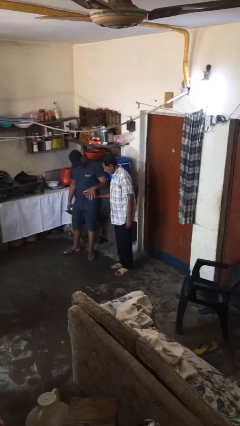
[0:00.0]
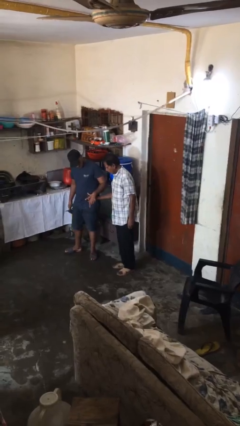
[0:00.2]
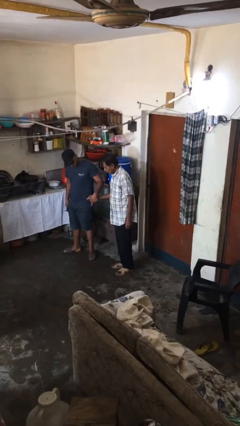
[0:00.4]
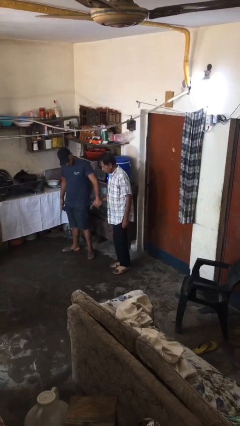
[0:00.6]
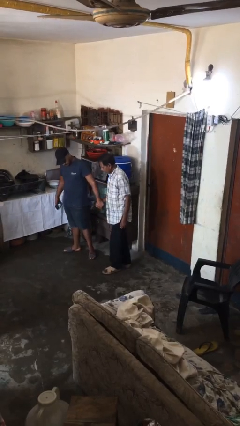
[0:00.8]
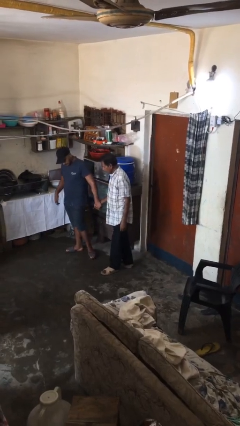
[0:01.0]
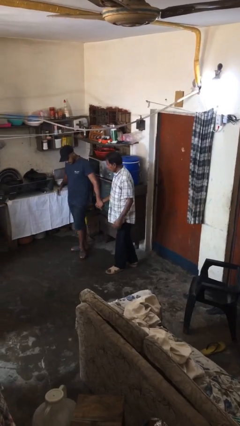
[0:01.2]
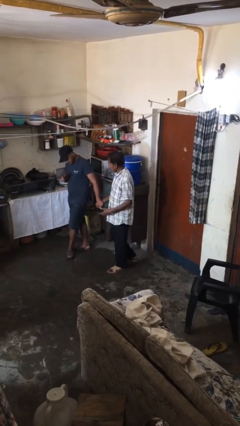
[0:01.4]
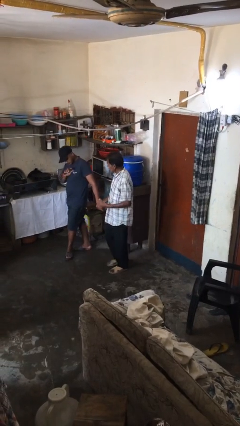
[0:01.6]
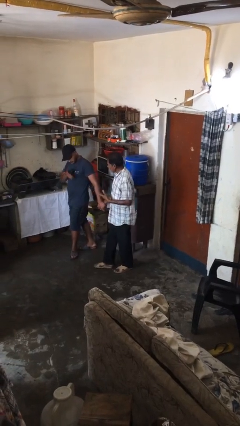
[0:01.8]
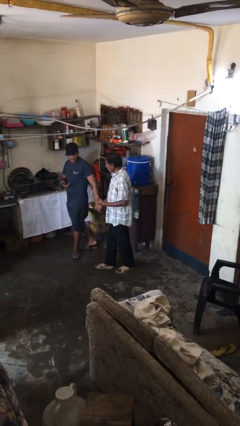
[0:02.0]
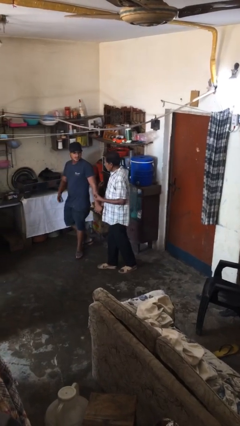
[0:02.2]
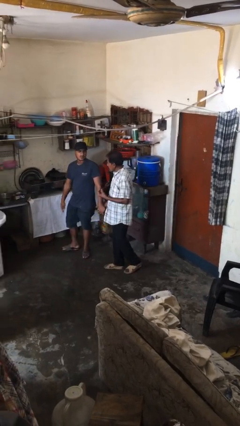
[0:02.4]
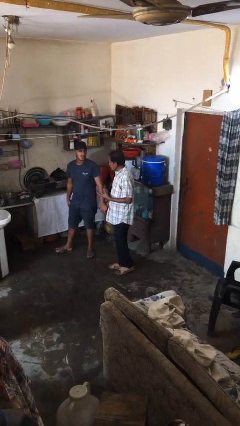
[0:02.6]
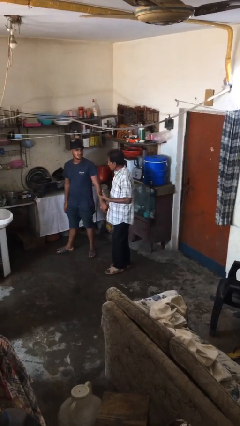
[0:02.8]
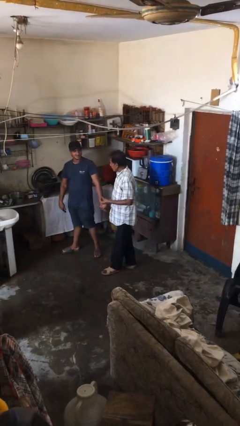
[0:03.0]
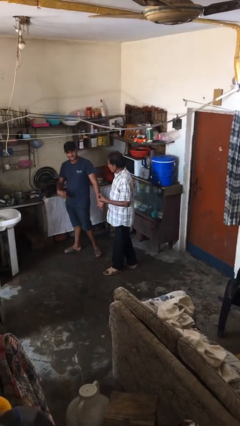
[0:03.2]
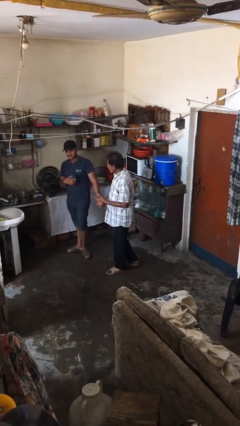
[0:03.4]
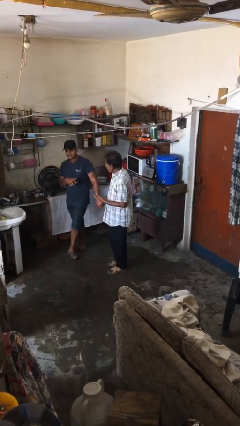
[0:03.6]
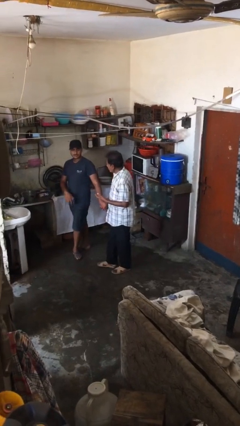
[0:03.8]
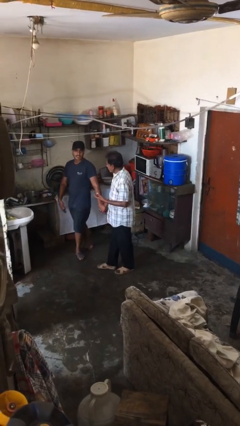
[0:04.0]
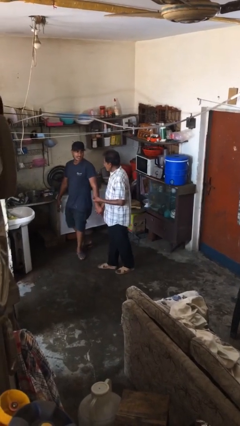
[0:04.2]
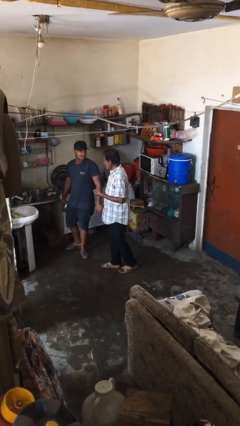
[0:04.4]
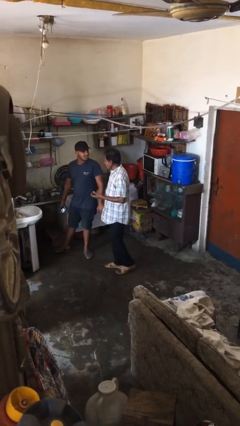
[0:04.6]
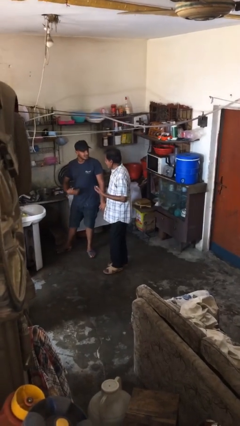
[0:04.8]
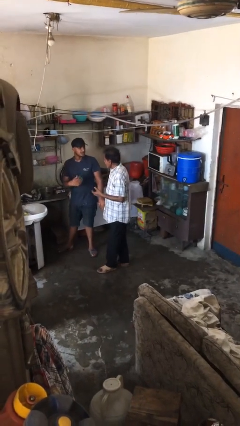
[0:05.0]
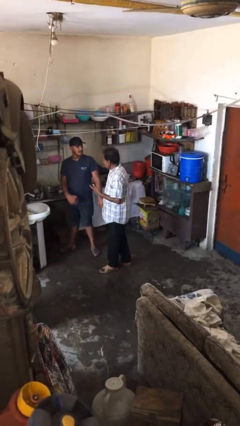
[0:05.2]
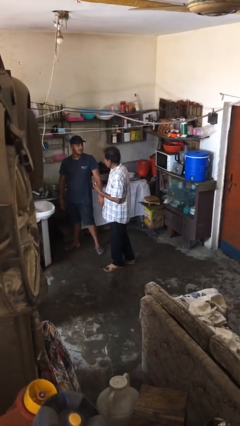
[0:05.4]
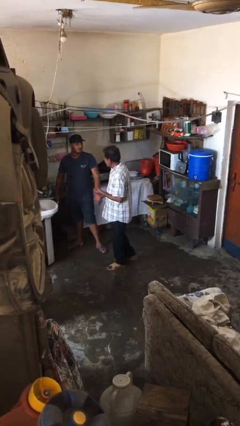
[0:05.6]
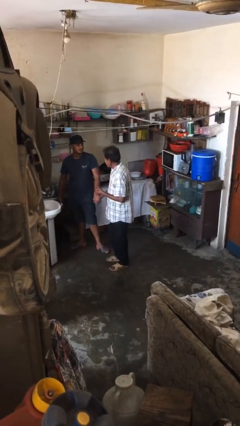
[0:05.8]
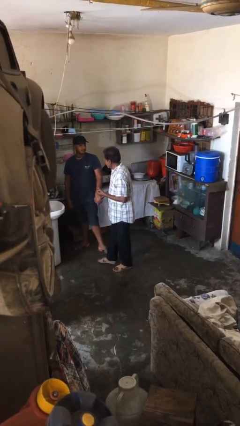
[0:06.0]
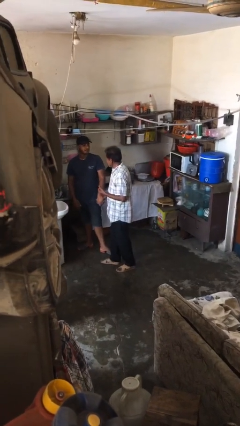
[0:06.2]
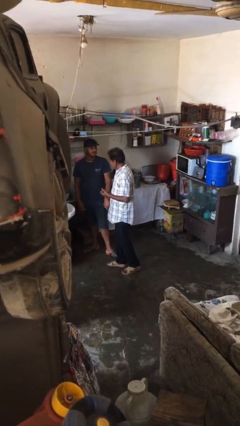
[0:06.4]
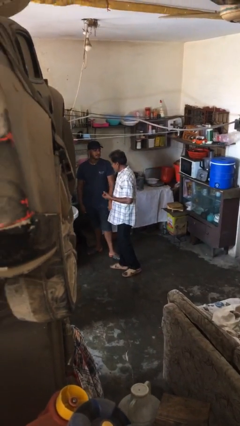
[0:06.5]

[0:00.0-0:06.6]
person holds hand

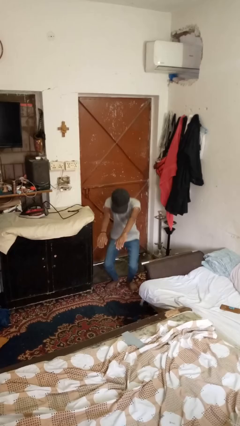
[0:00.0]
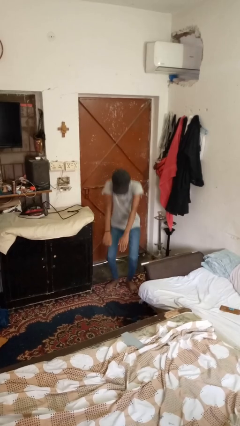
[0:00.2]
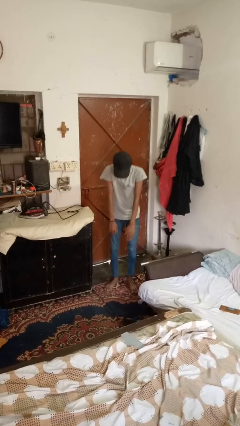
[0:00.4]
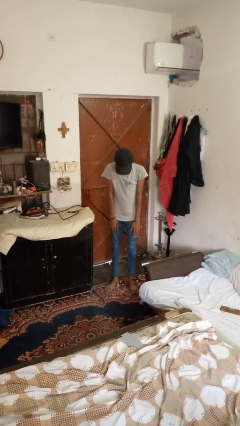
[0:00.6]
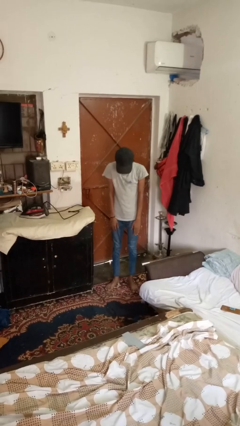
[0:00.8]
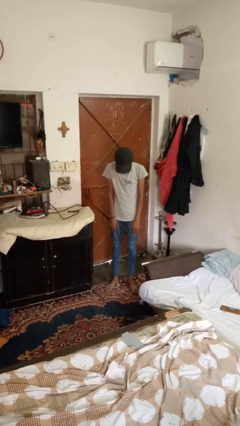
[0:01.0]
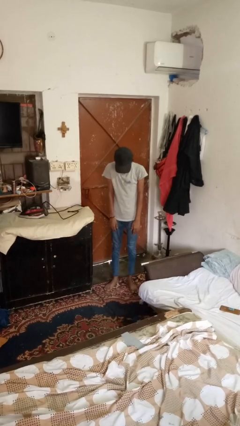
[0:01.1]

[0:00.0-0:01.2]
person stands up

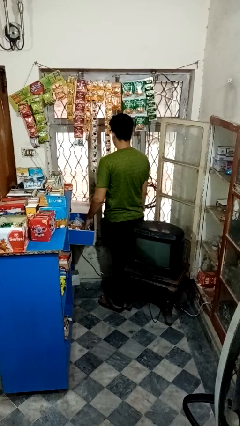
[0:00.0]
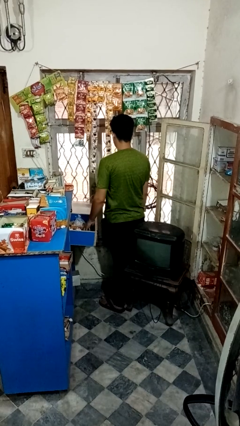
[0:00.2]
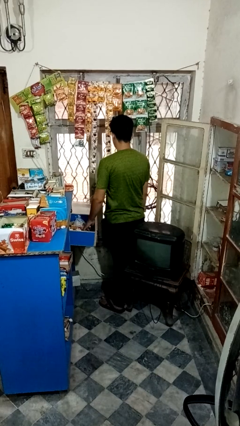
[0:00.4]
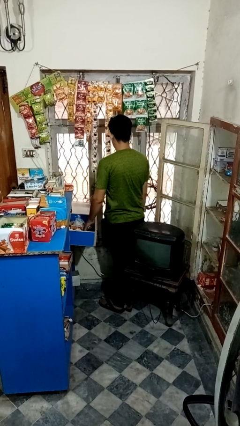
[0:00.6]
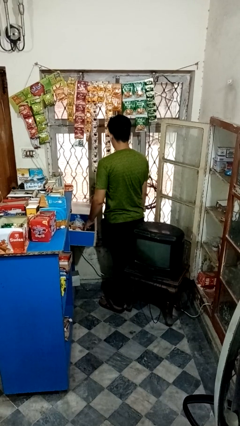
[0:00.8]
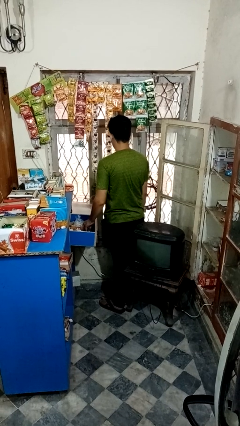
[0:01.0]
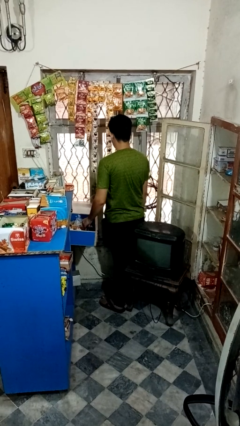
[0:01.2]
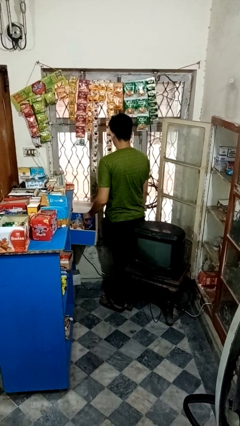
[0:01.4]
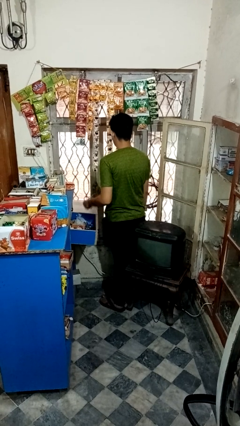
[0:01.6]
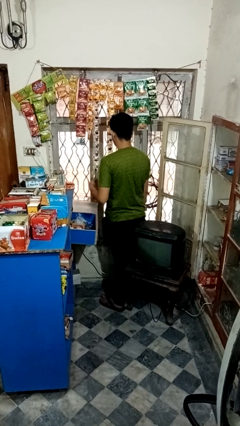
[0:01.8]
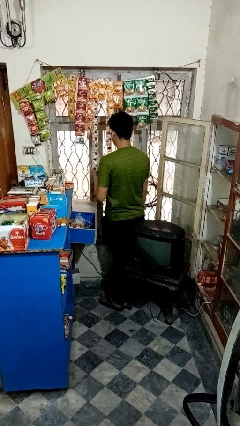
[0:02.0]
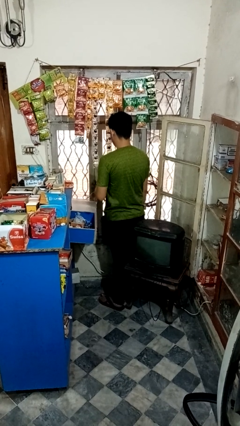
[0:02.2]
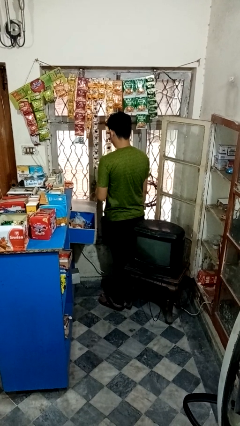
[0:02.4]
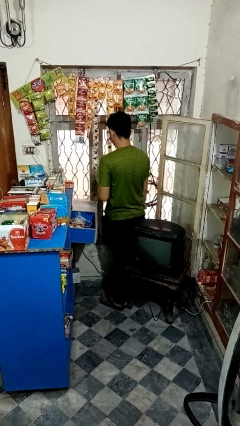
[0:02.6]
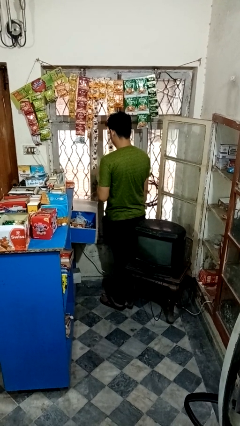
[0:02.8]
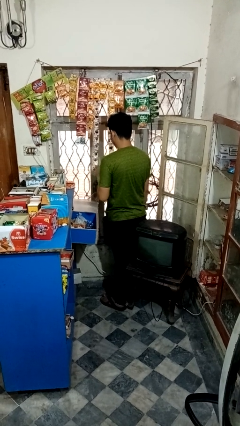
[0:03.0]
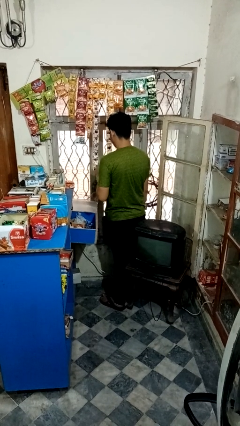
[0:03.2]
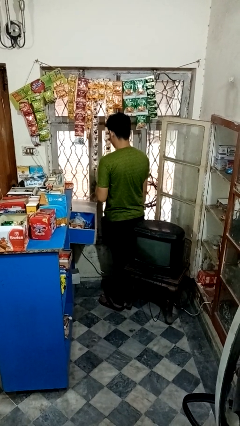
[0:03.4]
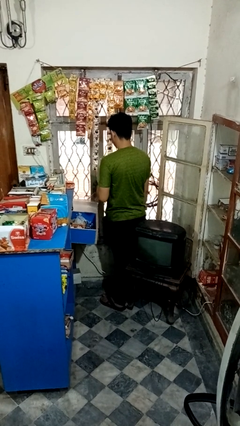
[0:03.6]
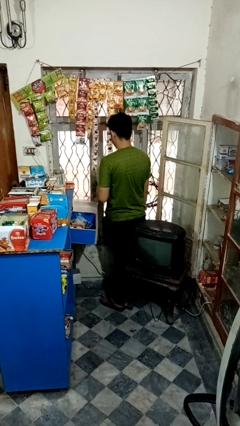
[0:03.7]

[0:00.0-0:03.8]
person searches in kitchen drawer

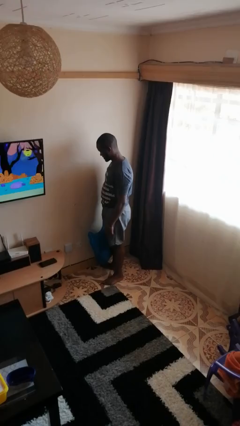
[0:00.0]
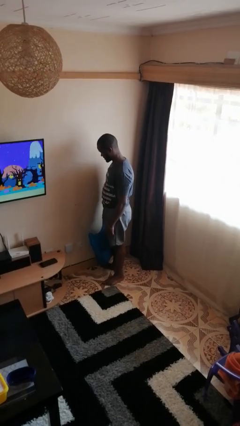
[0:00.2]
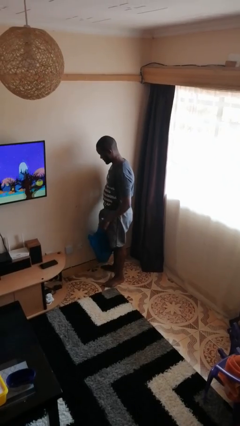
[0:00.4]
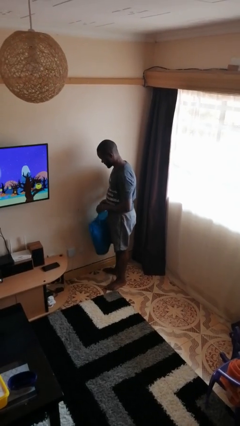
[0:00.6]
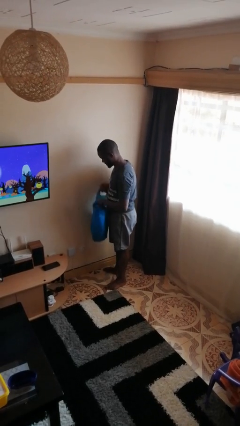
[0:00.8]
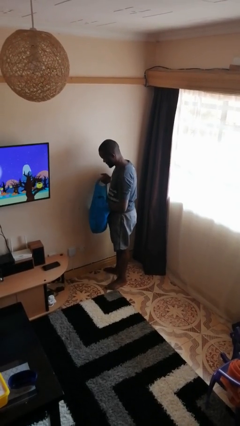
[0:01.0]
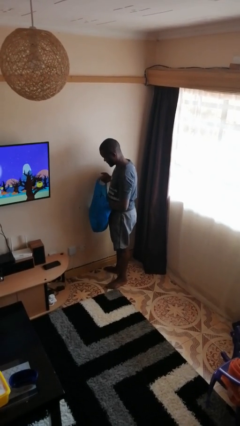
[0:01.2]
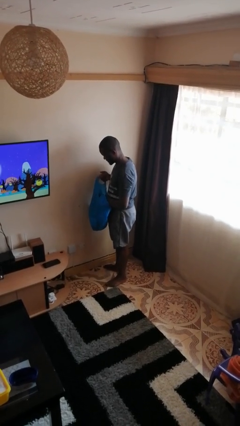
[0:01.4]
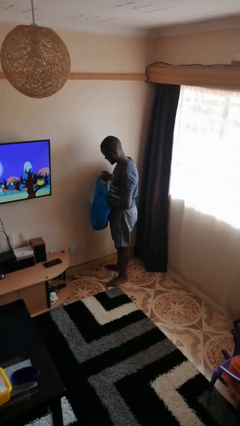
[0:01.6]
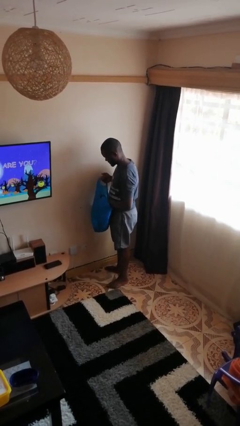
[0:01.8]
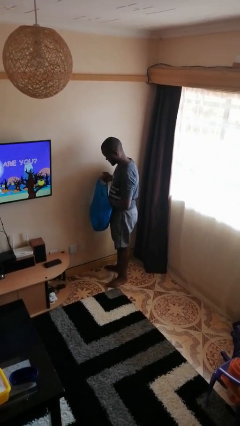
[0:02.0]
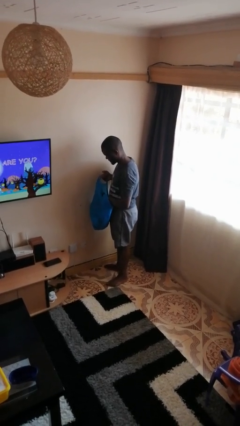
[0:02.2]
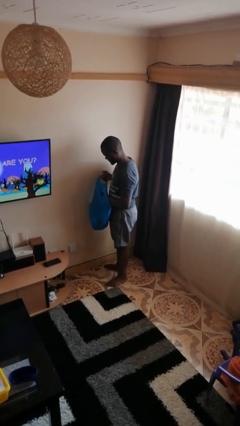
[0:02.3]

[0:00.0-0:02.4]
person searches in bag

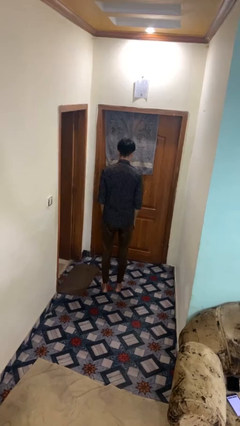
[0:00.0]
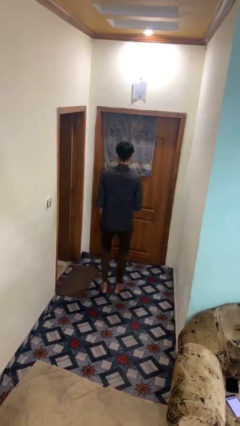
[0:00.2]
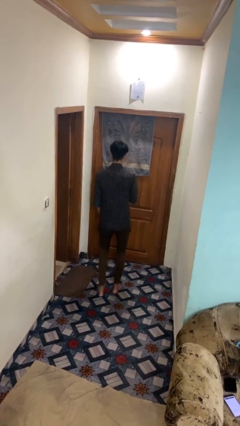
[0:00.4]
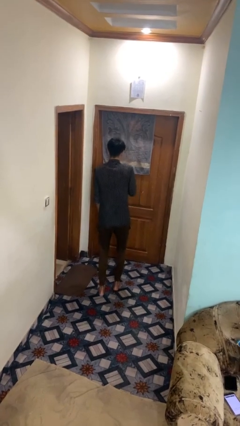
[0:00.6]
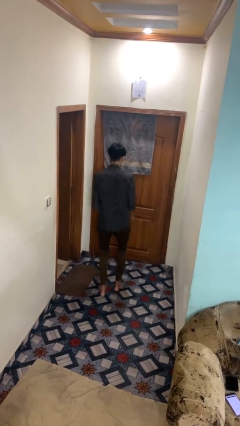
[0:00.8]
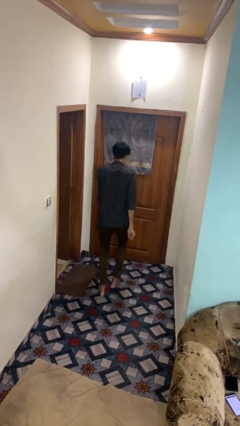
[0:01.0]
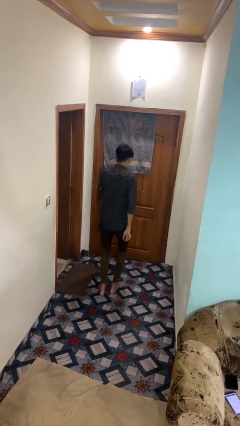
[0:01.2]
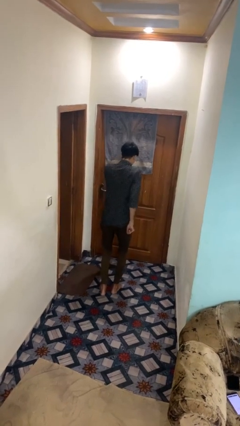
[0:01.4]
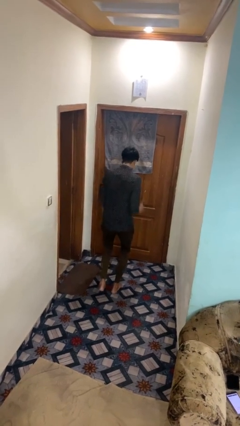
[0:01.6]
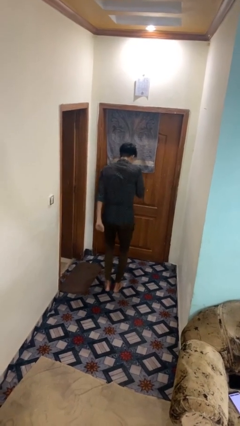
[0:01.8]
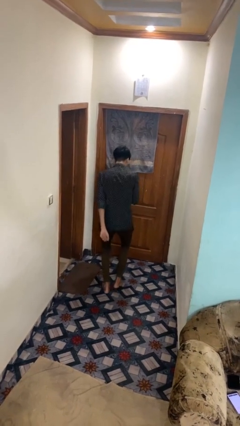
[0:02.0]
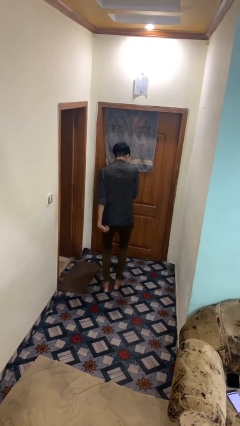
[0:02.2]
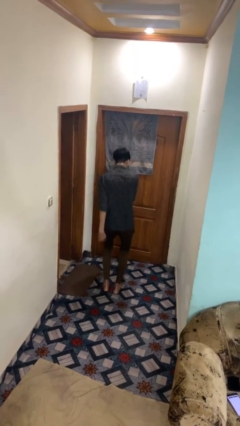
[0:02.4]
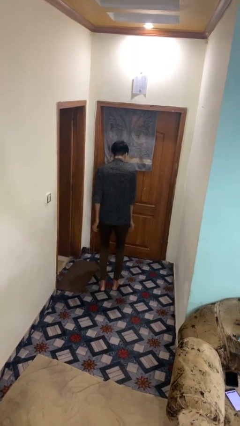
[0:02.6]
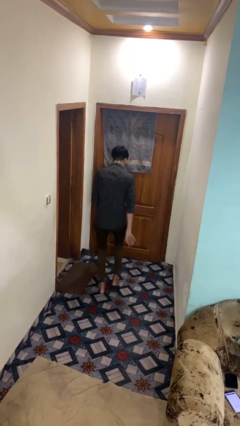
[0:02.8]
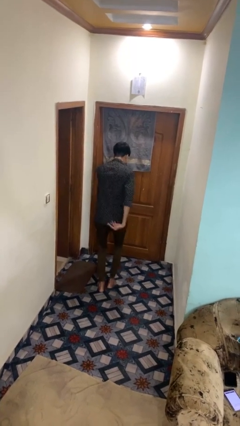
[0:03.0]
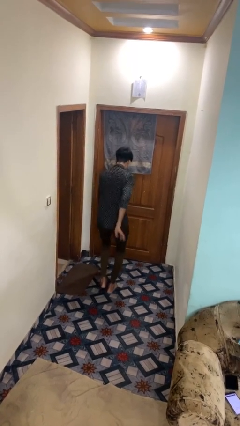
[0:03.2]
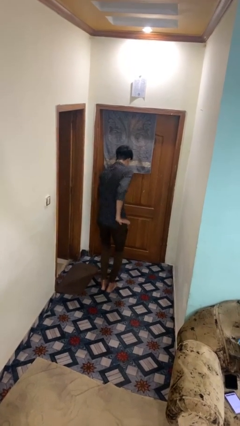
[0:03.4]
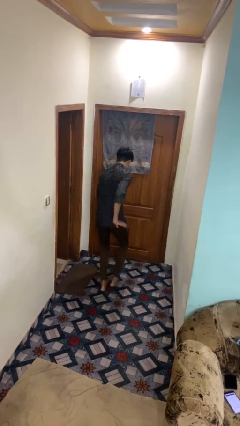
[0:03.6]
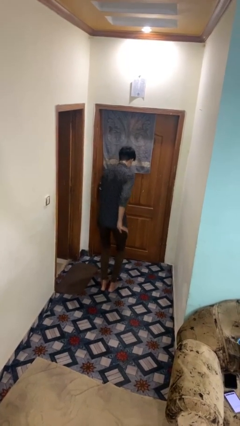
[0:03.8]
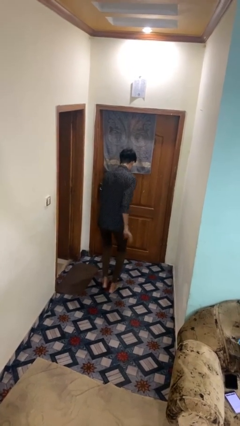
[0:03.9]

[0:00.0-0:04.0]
person dances in place
